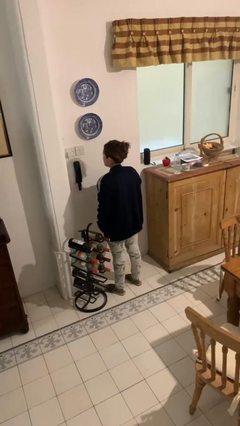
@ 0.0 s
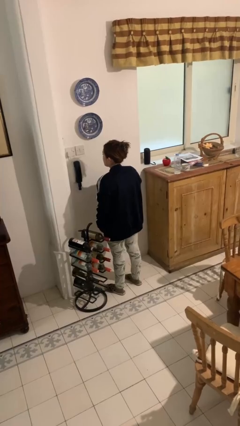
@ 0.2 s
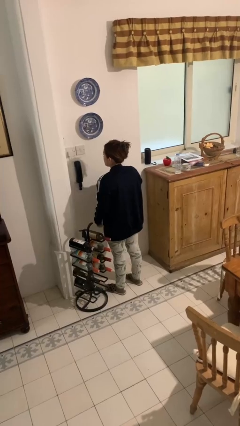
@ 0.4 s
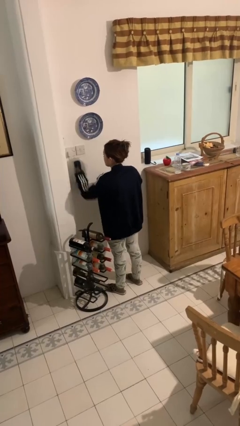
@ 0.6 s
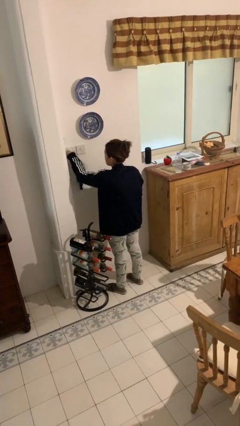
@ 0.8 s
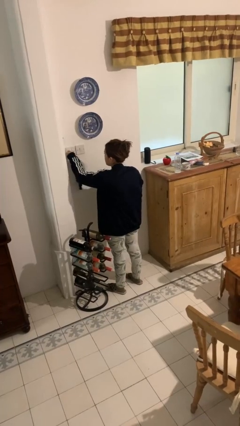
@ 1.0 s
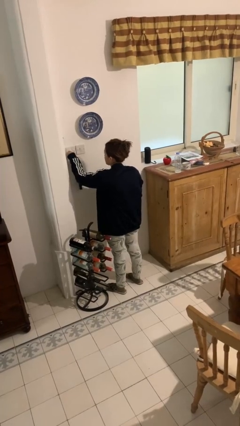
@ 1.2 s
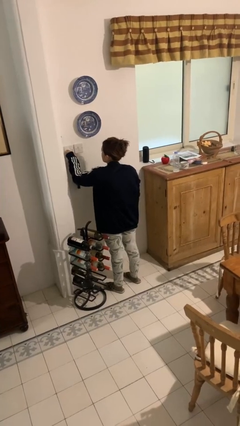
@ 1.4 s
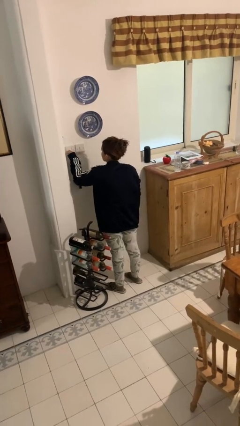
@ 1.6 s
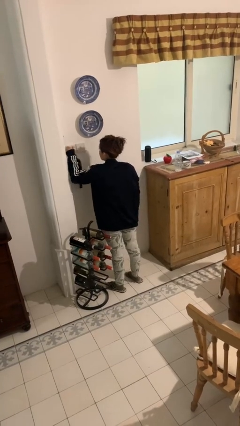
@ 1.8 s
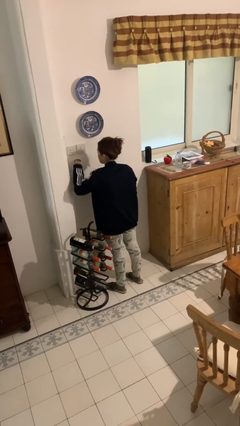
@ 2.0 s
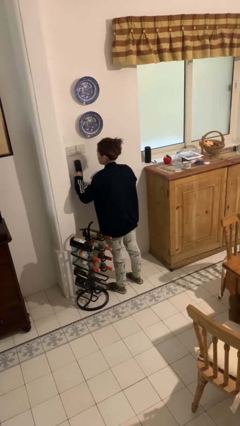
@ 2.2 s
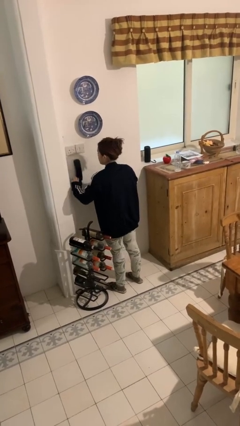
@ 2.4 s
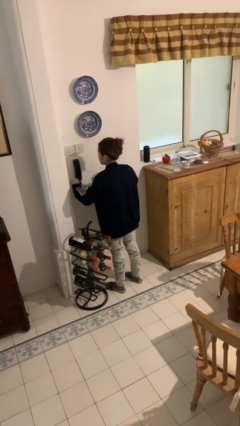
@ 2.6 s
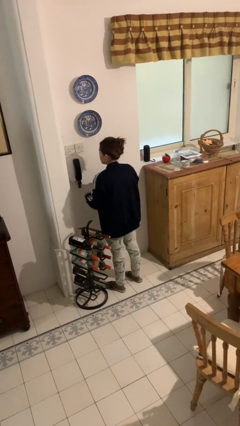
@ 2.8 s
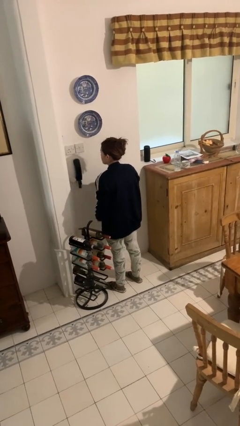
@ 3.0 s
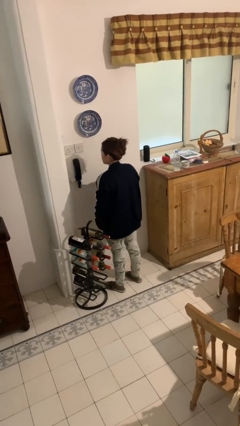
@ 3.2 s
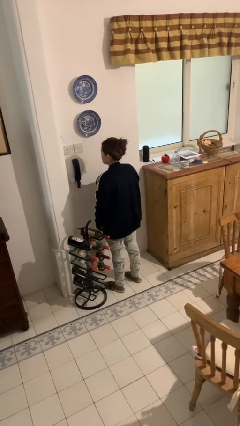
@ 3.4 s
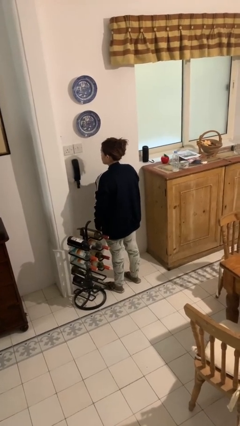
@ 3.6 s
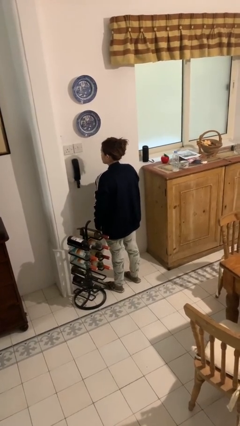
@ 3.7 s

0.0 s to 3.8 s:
person unplugs from electrical socket

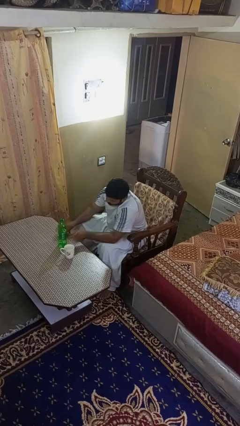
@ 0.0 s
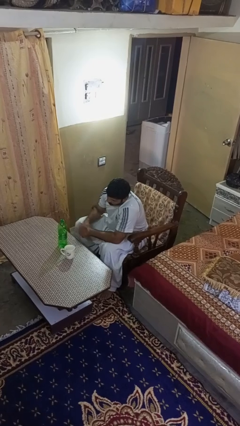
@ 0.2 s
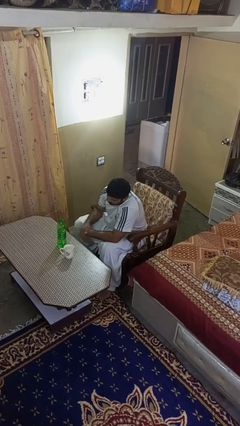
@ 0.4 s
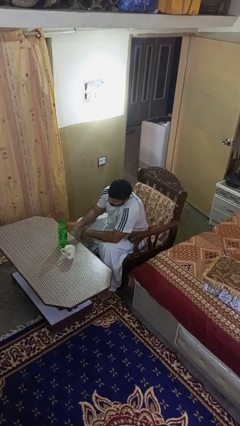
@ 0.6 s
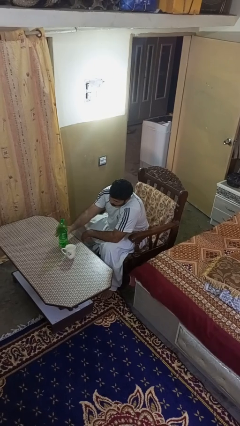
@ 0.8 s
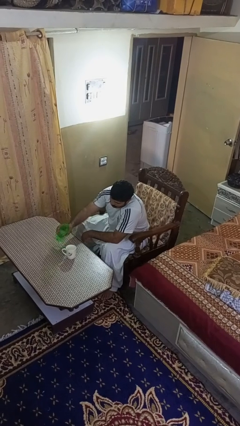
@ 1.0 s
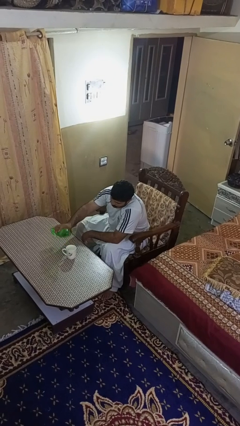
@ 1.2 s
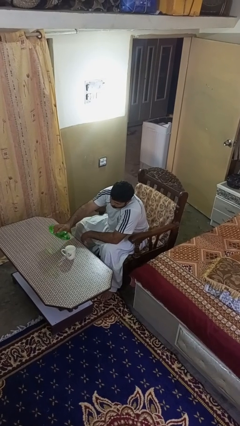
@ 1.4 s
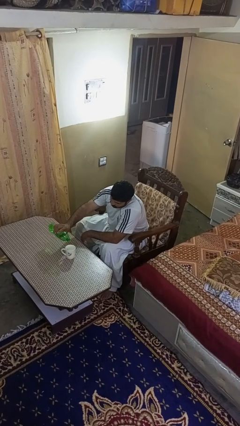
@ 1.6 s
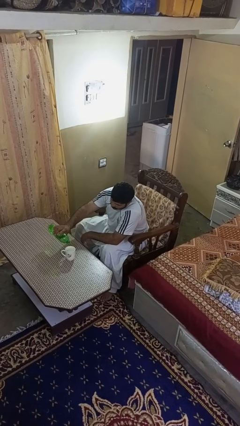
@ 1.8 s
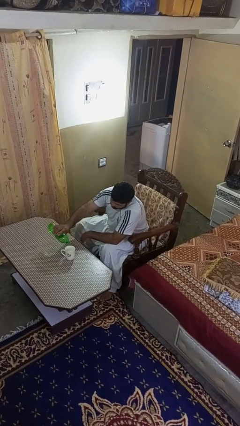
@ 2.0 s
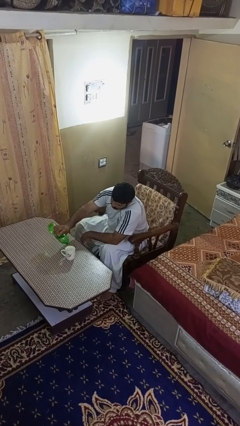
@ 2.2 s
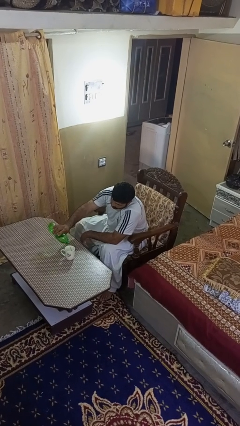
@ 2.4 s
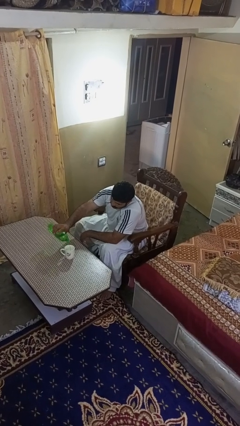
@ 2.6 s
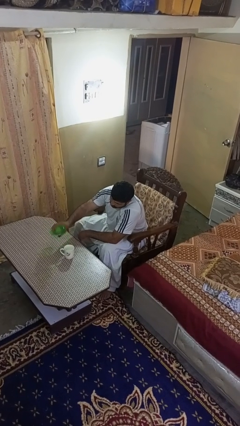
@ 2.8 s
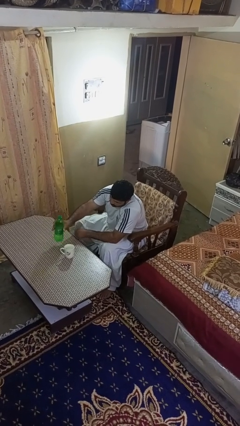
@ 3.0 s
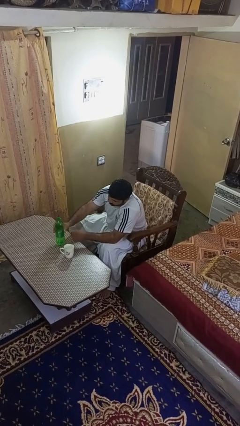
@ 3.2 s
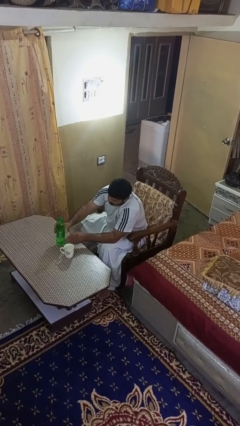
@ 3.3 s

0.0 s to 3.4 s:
person pours liquid into cup

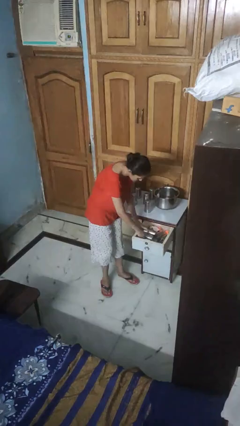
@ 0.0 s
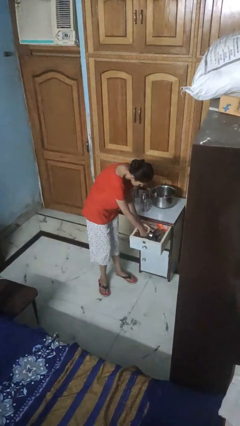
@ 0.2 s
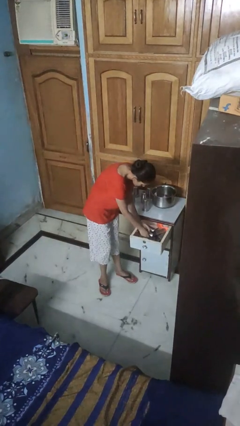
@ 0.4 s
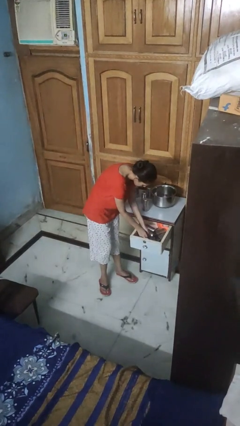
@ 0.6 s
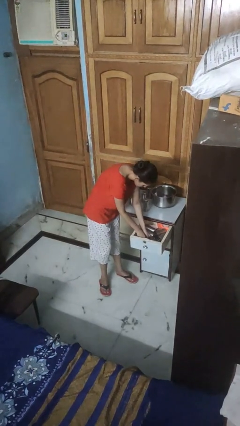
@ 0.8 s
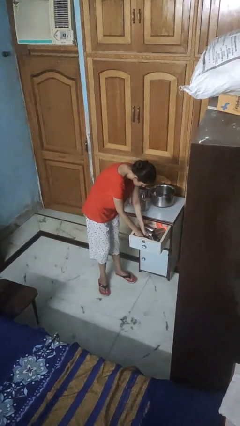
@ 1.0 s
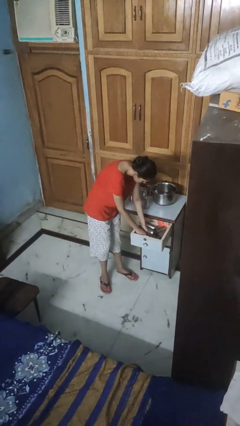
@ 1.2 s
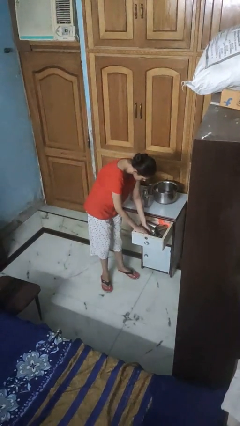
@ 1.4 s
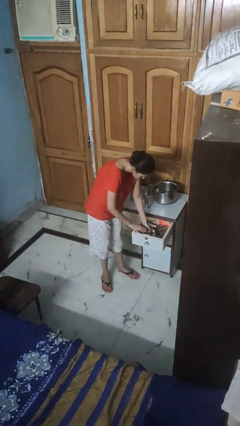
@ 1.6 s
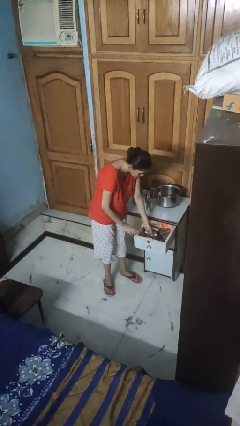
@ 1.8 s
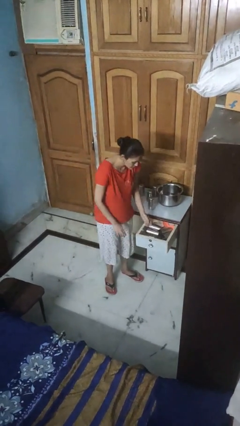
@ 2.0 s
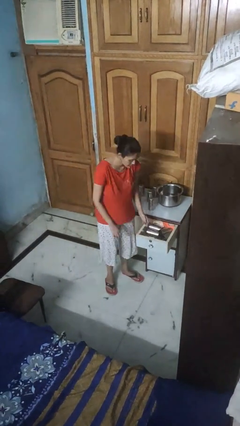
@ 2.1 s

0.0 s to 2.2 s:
person searches in kitchen drawer

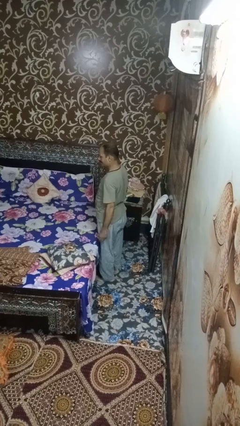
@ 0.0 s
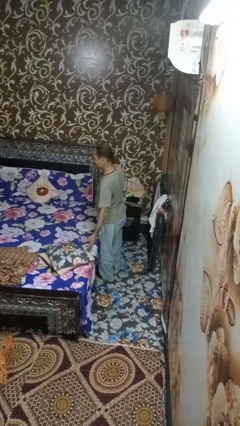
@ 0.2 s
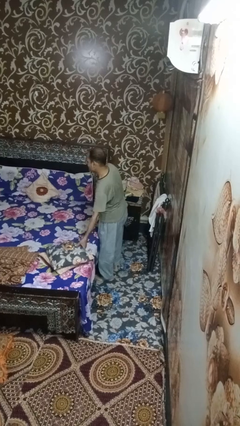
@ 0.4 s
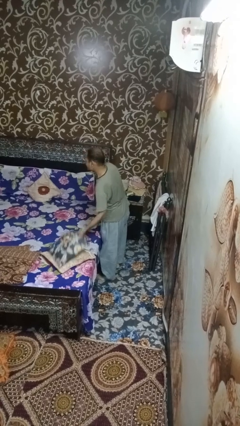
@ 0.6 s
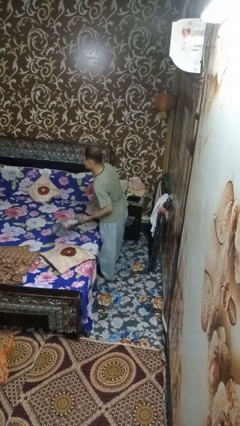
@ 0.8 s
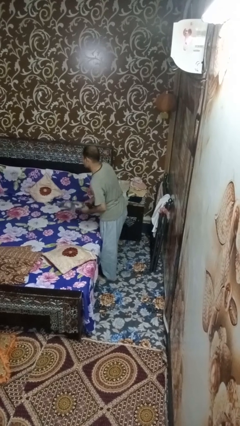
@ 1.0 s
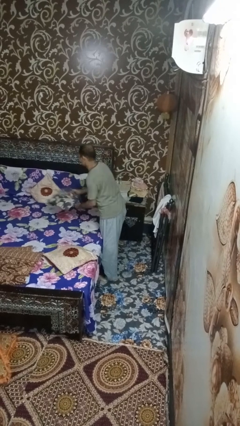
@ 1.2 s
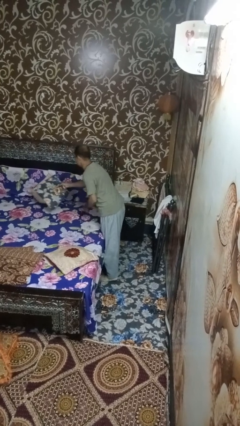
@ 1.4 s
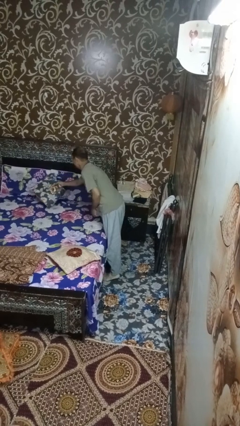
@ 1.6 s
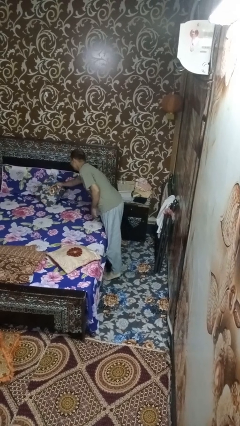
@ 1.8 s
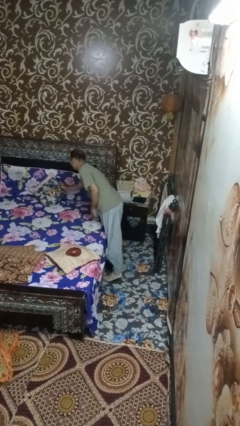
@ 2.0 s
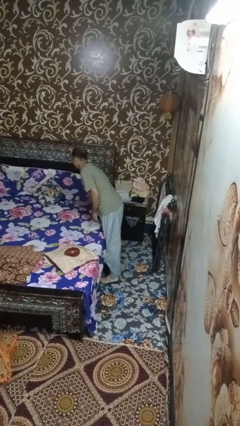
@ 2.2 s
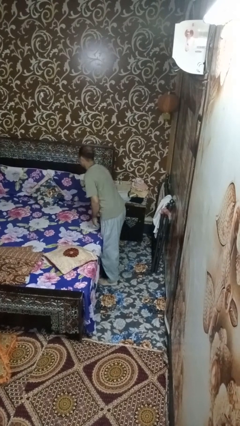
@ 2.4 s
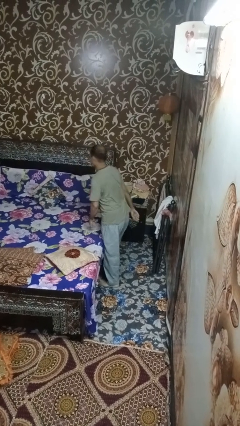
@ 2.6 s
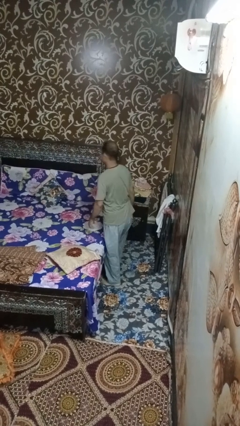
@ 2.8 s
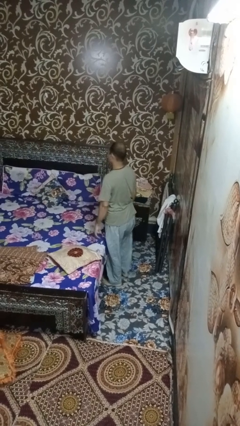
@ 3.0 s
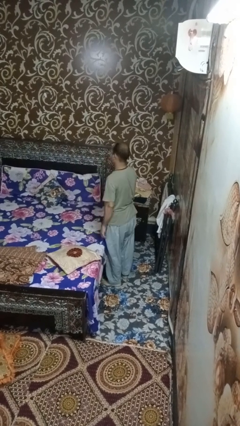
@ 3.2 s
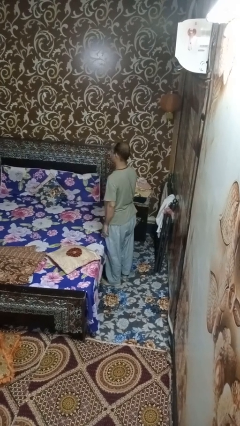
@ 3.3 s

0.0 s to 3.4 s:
person makes bed

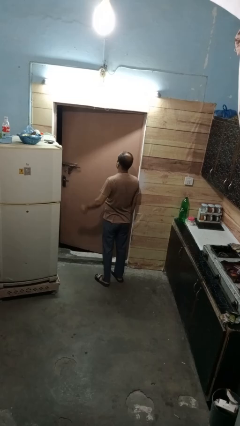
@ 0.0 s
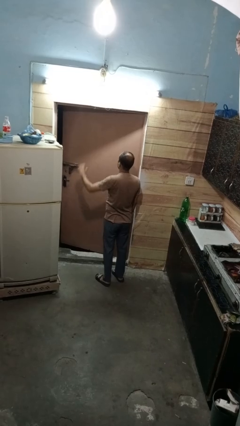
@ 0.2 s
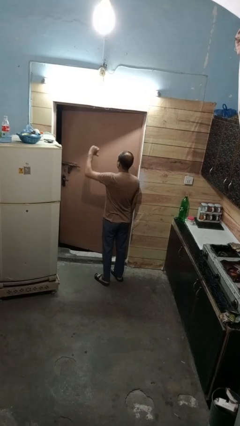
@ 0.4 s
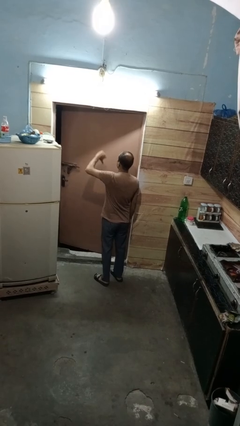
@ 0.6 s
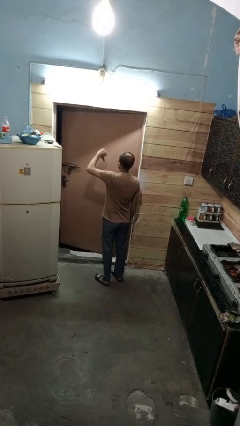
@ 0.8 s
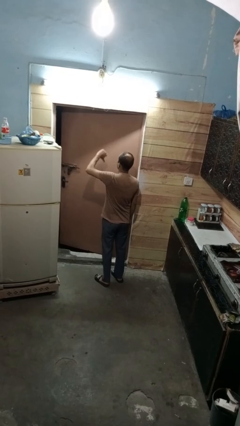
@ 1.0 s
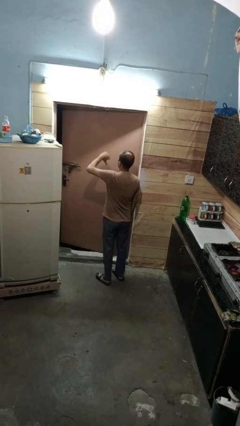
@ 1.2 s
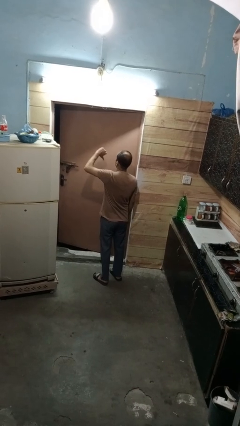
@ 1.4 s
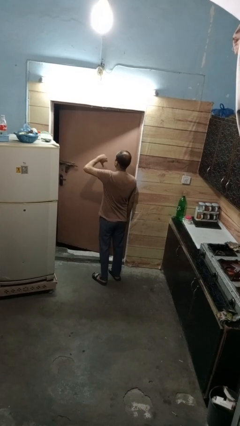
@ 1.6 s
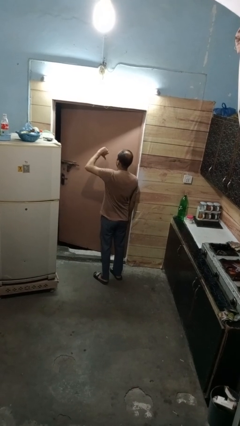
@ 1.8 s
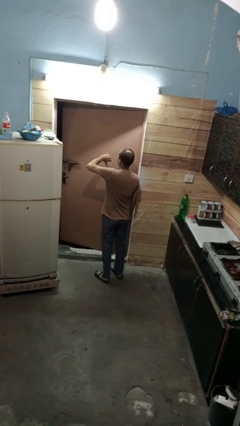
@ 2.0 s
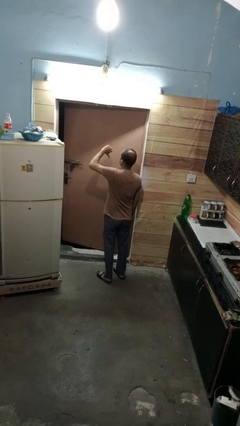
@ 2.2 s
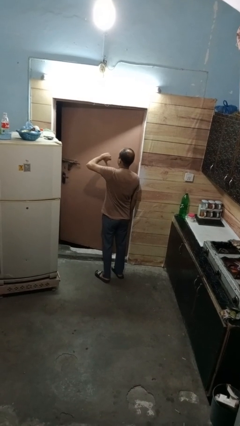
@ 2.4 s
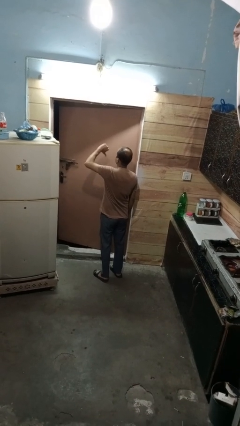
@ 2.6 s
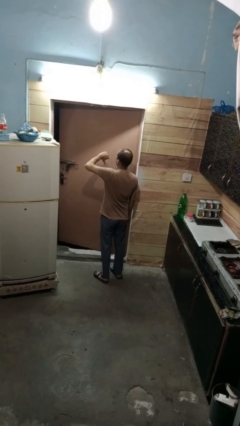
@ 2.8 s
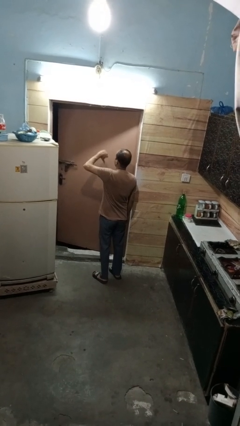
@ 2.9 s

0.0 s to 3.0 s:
person gestures hang loose

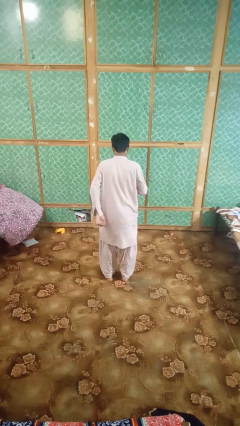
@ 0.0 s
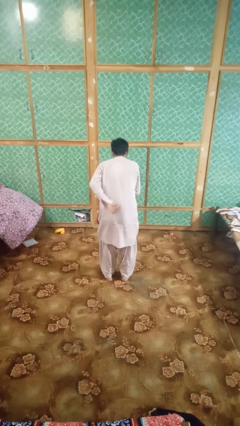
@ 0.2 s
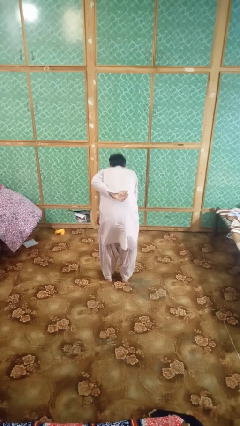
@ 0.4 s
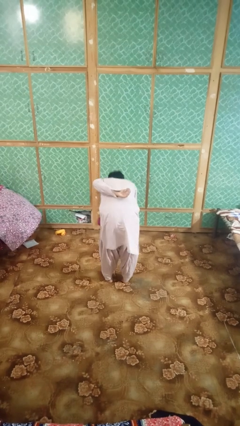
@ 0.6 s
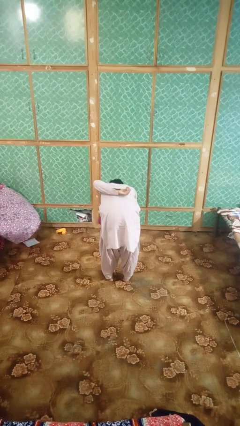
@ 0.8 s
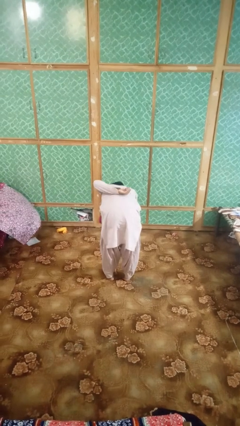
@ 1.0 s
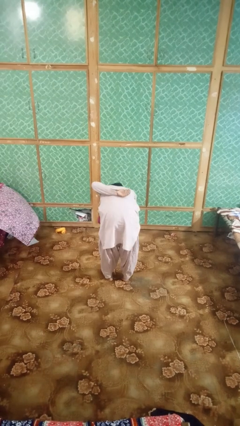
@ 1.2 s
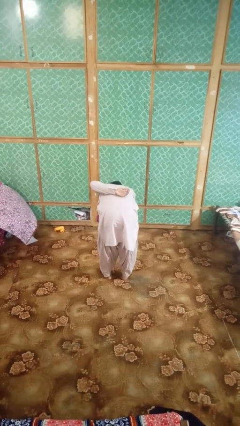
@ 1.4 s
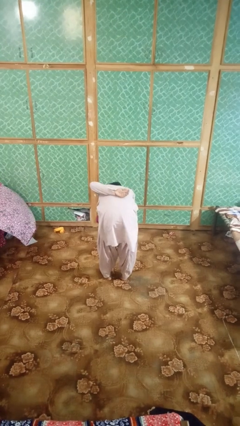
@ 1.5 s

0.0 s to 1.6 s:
person bows
